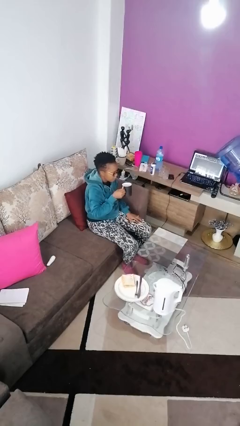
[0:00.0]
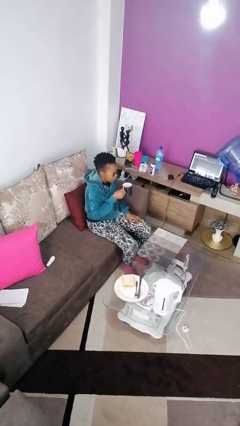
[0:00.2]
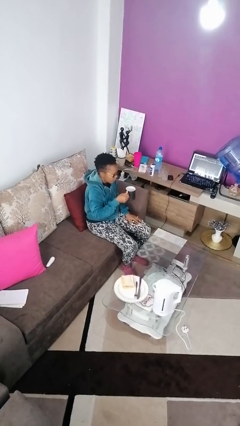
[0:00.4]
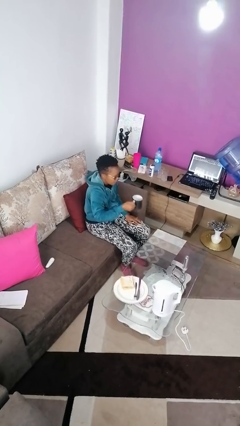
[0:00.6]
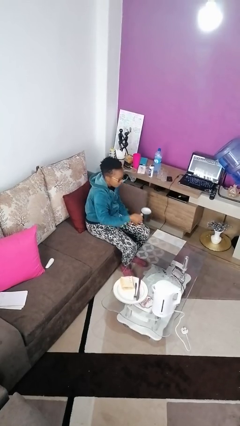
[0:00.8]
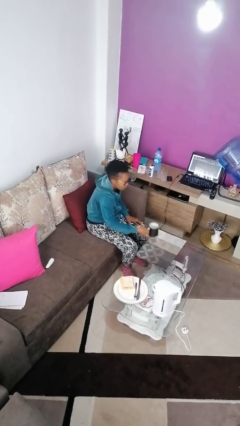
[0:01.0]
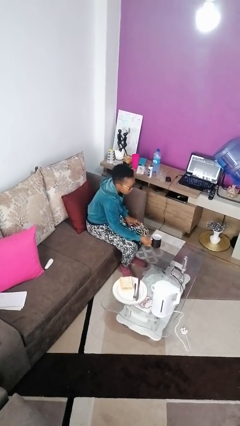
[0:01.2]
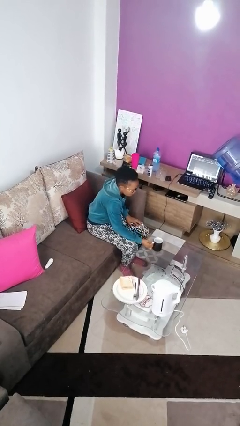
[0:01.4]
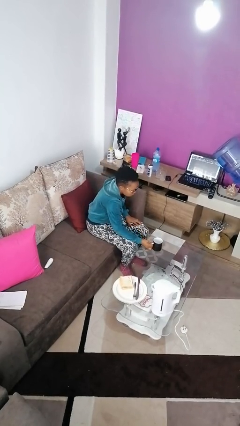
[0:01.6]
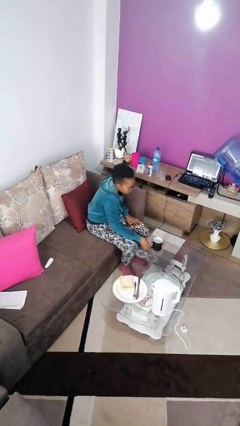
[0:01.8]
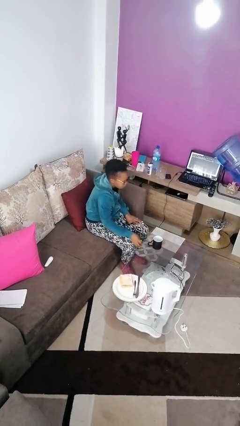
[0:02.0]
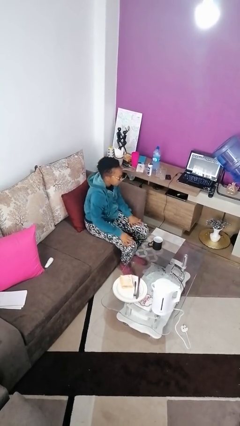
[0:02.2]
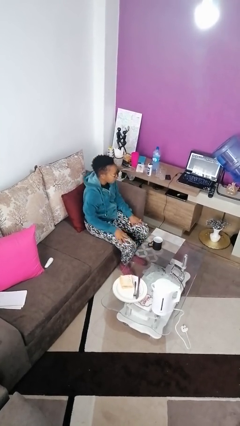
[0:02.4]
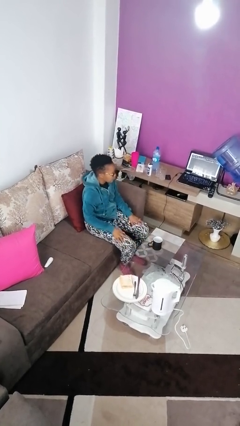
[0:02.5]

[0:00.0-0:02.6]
person puts down object on table

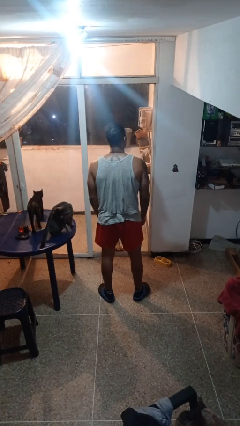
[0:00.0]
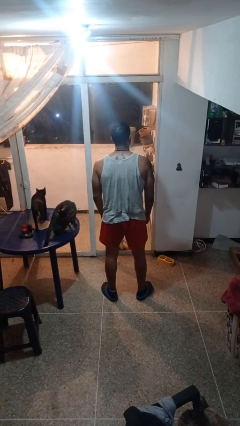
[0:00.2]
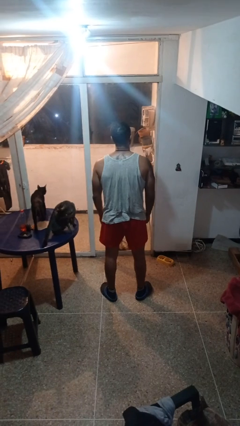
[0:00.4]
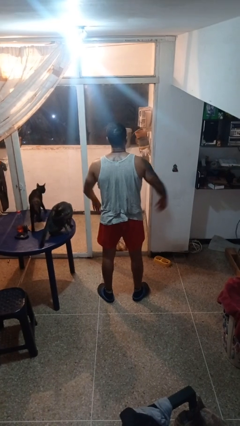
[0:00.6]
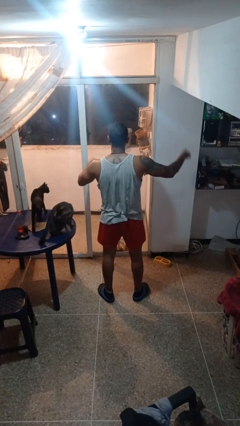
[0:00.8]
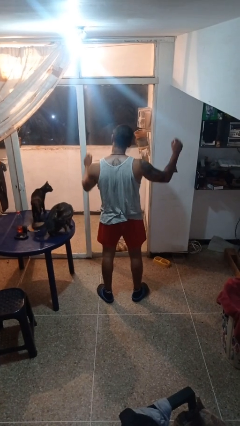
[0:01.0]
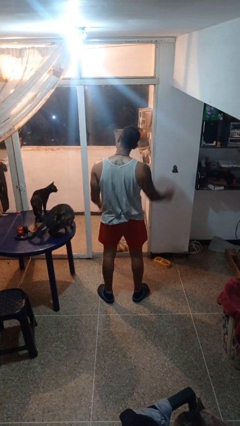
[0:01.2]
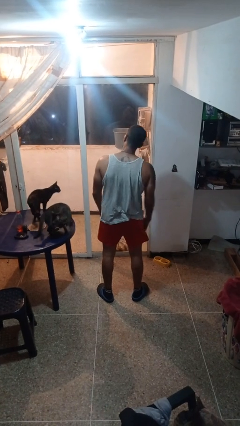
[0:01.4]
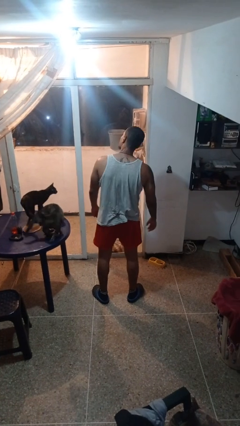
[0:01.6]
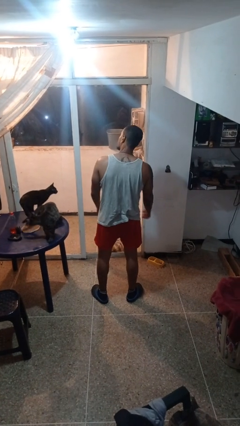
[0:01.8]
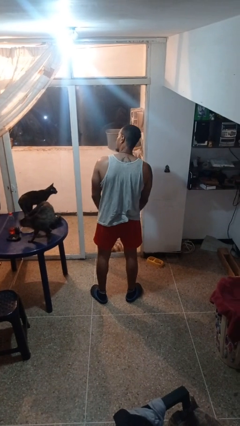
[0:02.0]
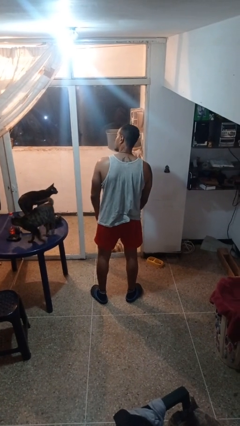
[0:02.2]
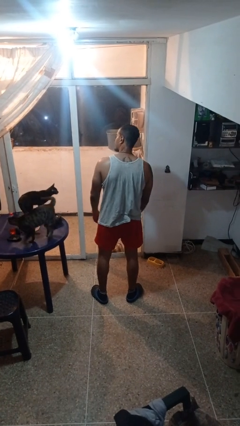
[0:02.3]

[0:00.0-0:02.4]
person slaps hands on thighs

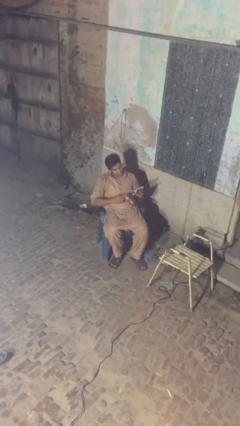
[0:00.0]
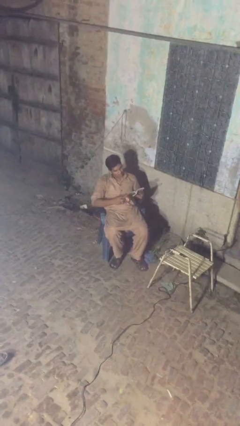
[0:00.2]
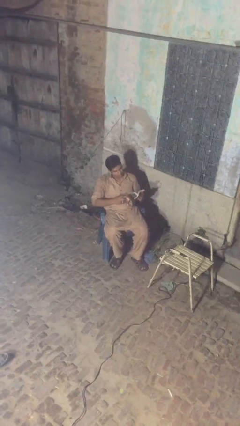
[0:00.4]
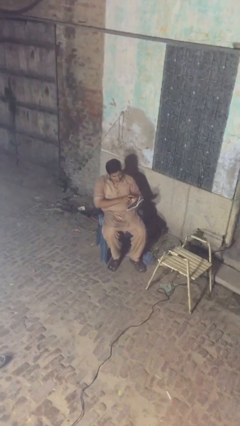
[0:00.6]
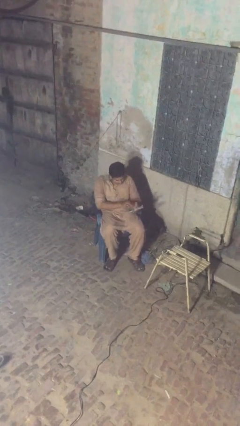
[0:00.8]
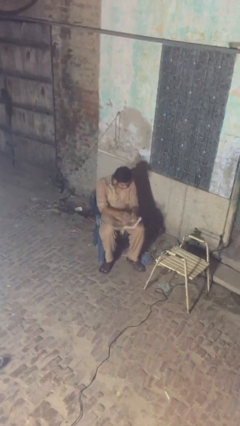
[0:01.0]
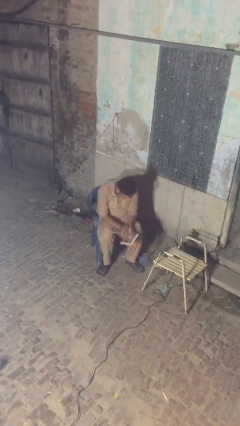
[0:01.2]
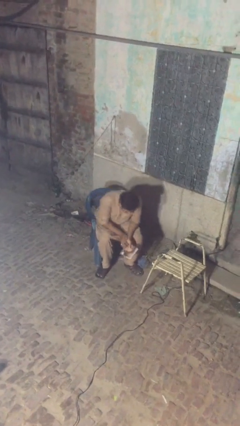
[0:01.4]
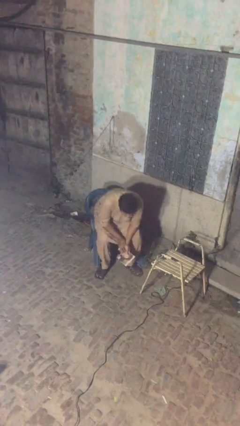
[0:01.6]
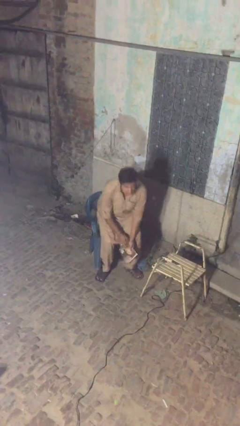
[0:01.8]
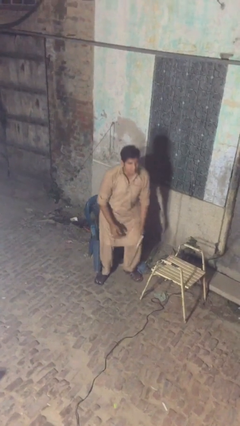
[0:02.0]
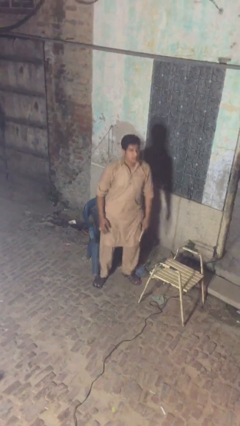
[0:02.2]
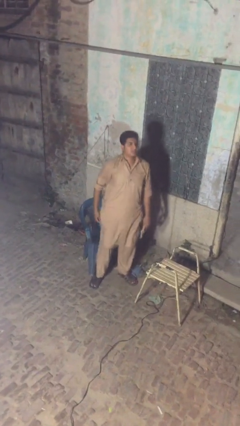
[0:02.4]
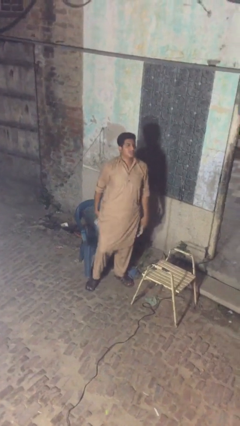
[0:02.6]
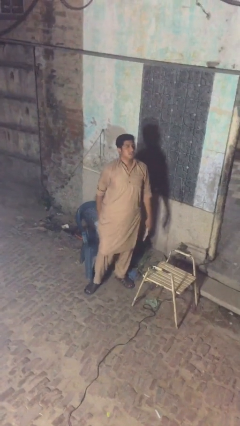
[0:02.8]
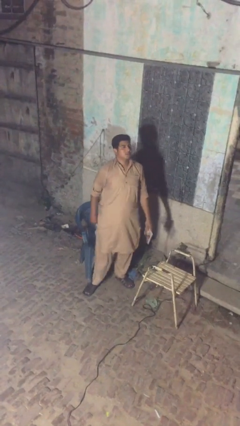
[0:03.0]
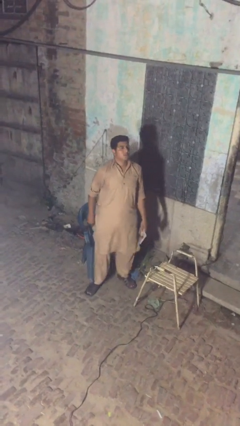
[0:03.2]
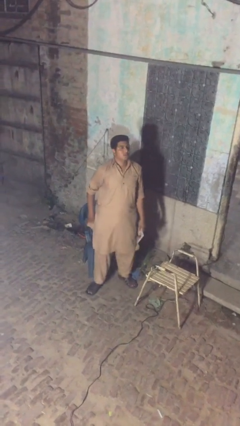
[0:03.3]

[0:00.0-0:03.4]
person stands up

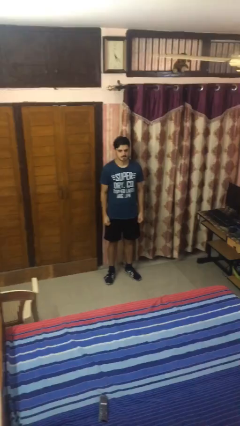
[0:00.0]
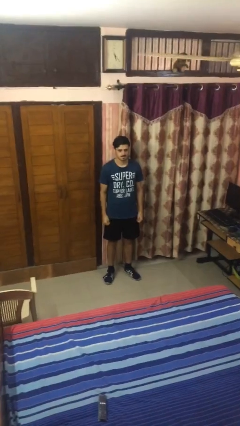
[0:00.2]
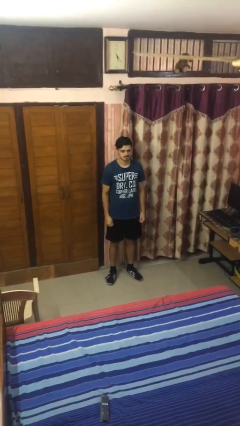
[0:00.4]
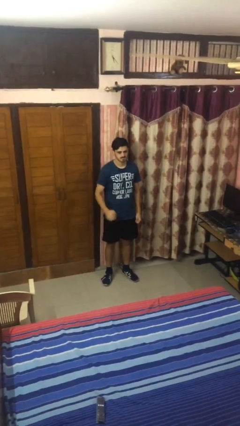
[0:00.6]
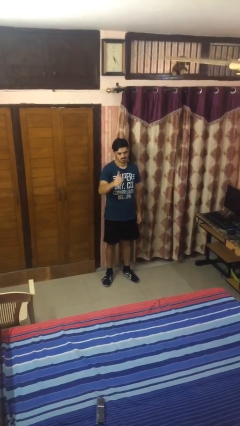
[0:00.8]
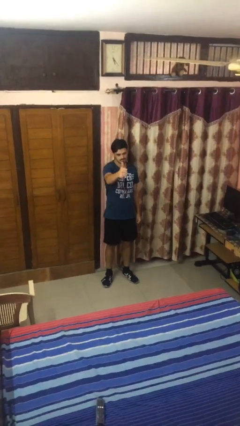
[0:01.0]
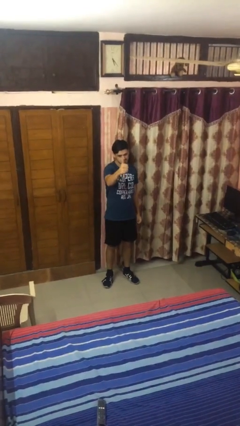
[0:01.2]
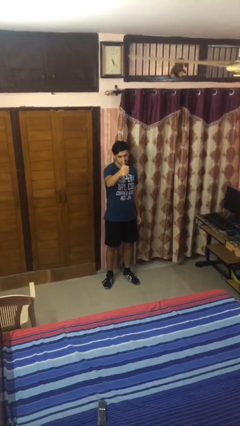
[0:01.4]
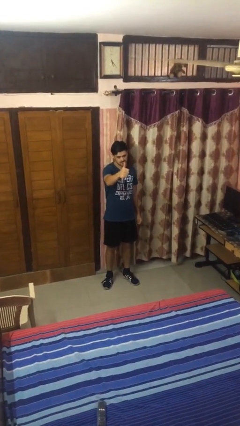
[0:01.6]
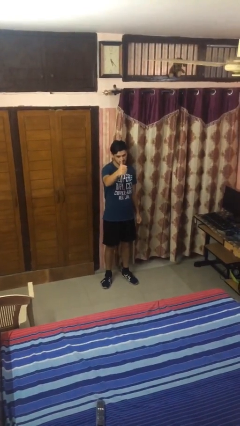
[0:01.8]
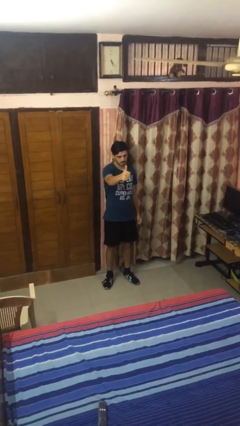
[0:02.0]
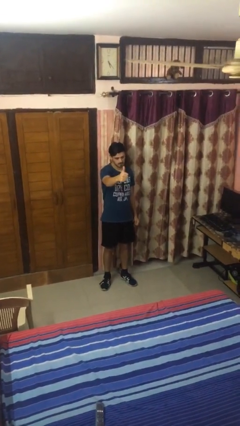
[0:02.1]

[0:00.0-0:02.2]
person gestures thumbs up

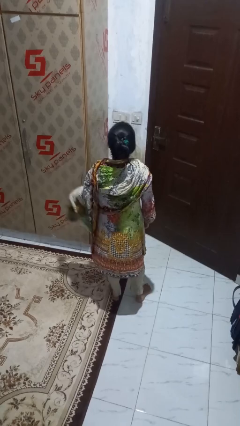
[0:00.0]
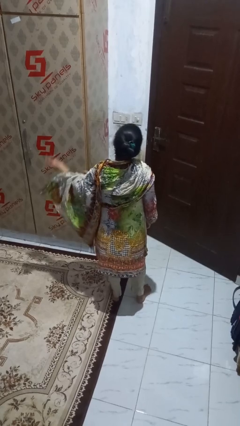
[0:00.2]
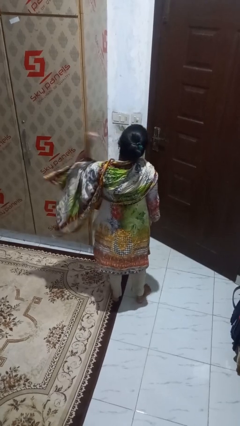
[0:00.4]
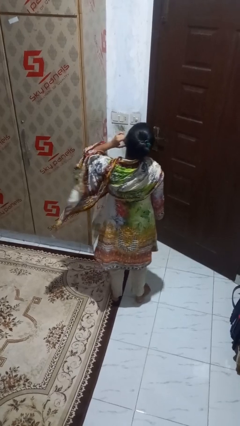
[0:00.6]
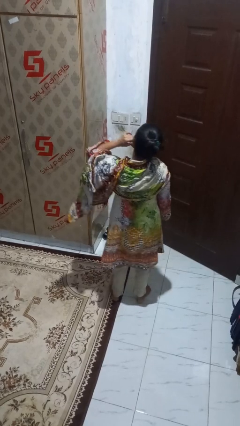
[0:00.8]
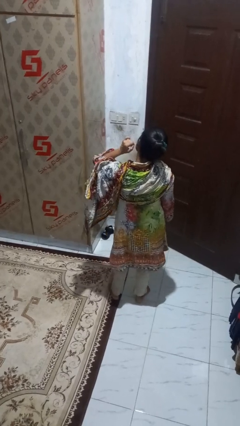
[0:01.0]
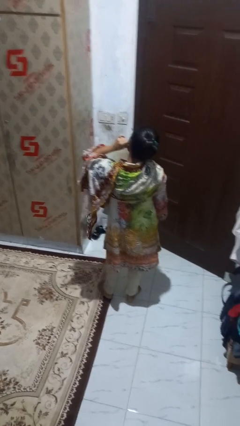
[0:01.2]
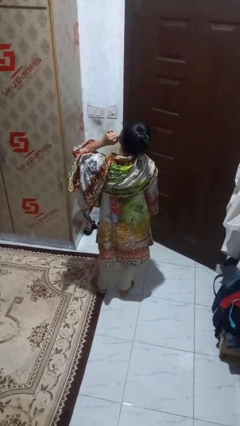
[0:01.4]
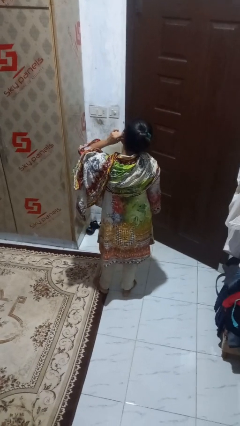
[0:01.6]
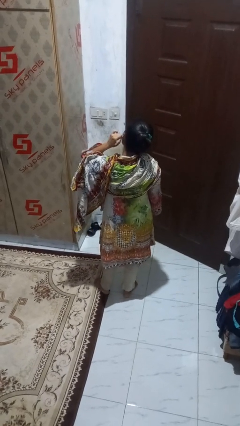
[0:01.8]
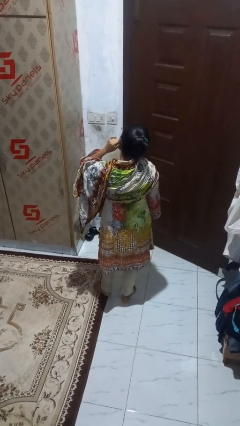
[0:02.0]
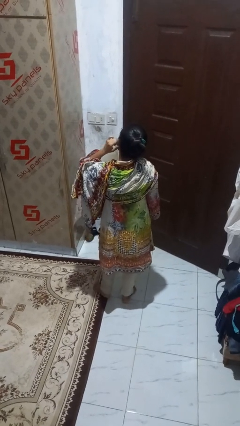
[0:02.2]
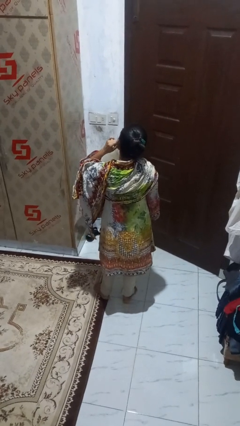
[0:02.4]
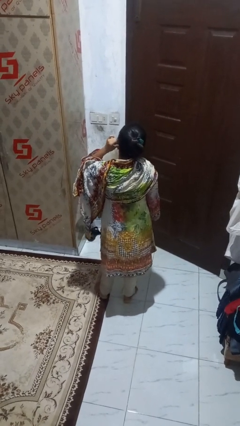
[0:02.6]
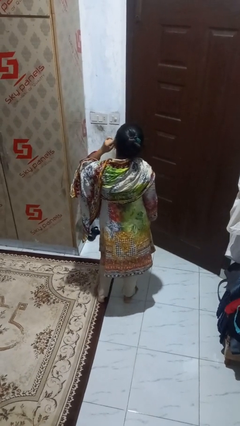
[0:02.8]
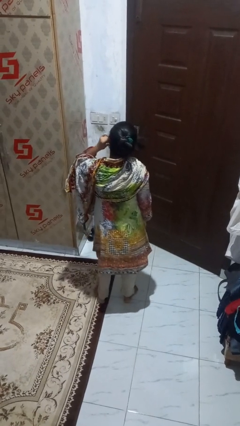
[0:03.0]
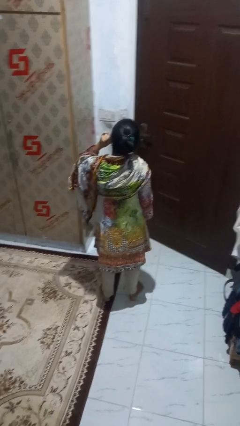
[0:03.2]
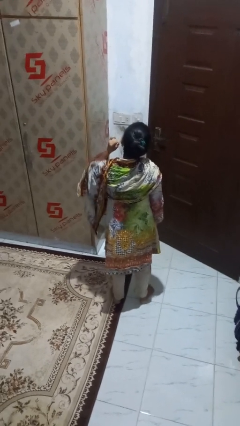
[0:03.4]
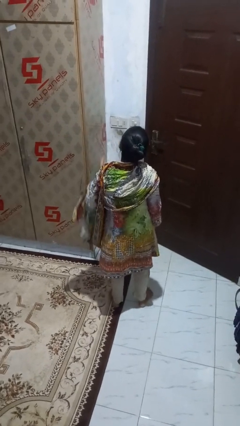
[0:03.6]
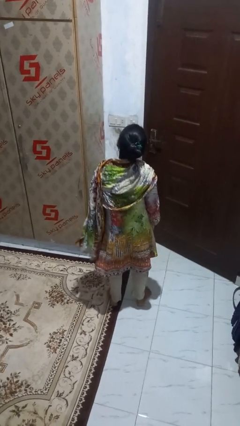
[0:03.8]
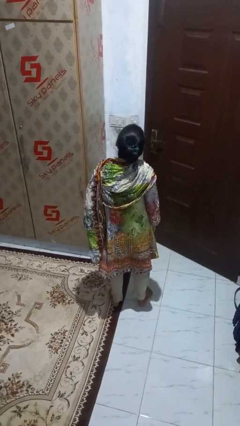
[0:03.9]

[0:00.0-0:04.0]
person touches earlobe

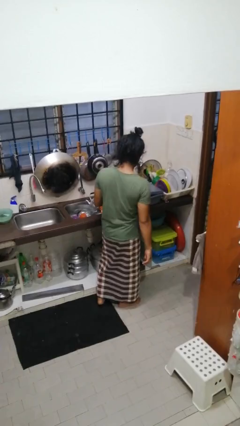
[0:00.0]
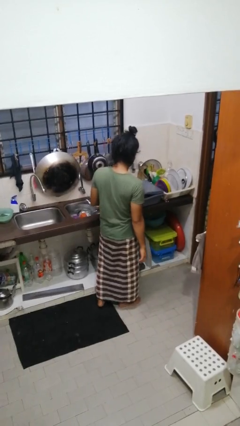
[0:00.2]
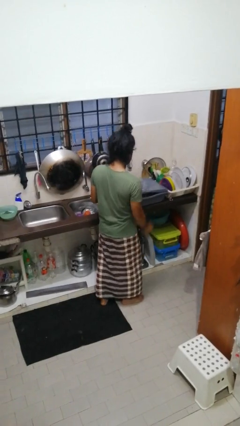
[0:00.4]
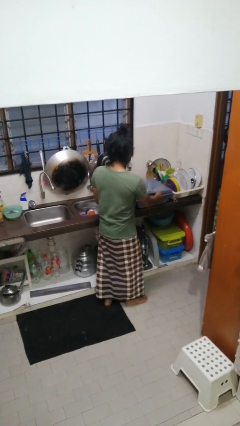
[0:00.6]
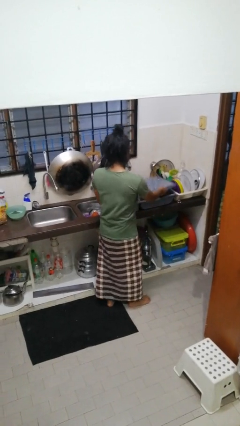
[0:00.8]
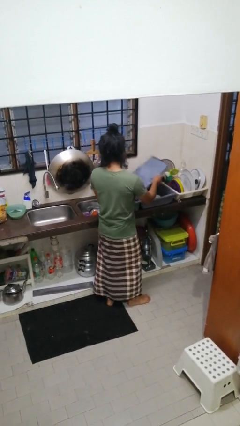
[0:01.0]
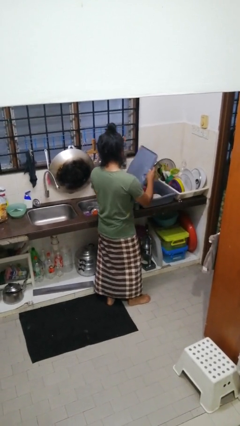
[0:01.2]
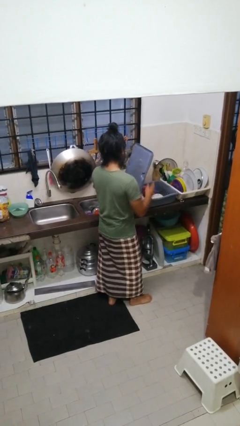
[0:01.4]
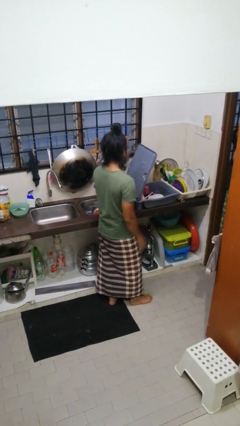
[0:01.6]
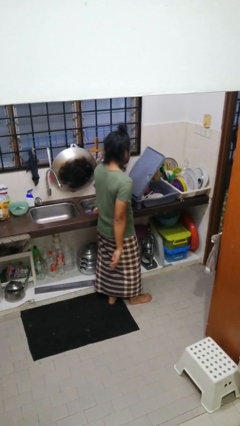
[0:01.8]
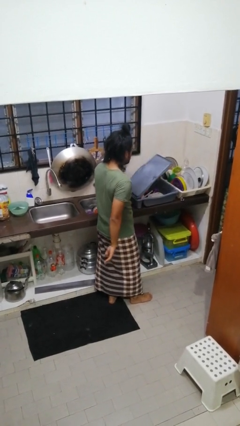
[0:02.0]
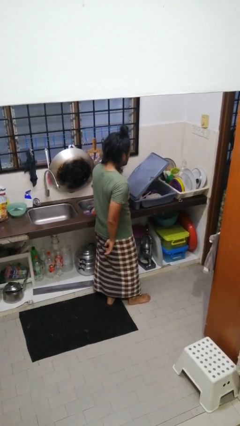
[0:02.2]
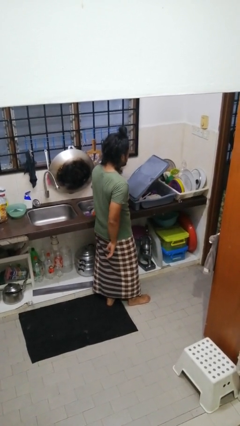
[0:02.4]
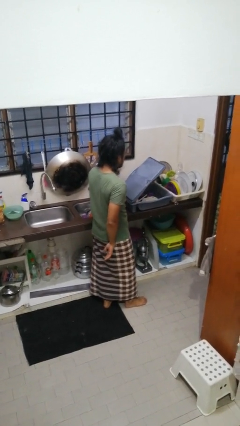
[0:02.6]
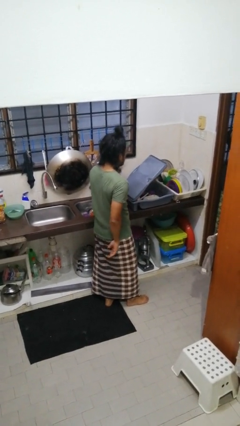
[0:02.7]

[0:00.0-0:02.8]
person opens dishwasher

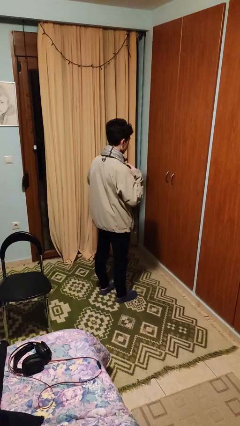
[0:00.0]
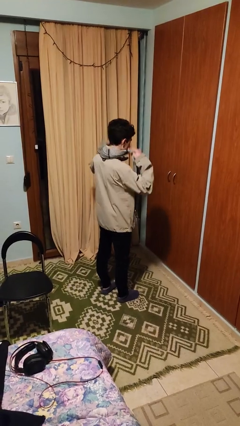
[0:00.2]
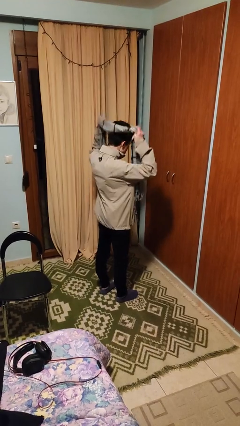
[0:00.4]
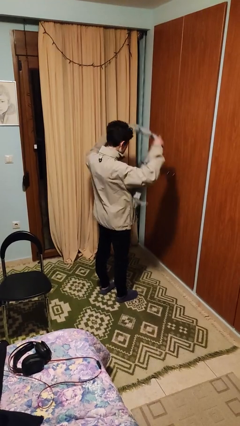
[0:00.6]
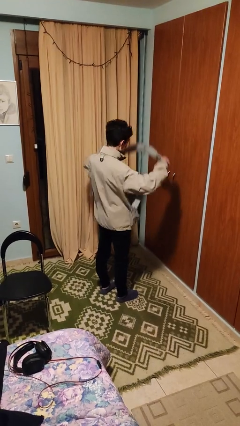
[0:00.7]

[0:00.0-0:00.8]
person takes off scarf
